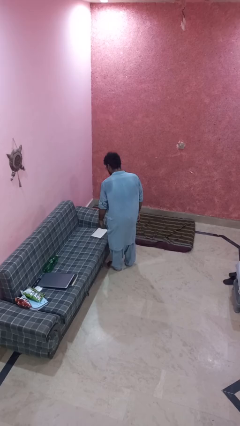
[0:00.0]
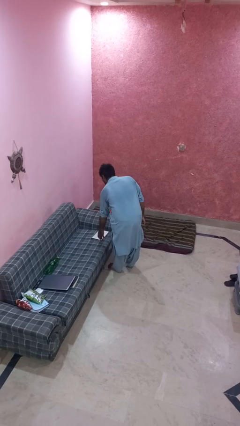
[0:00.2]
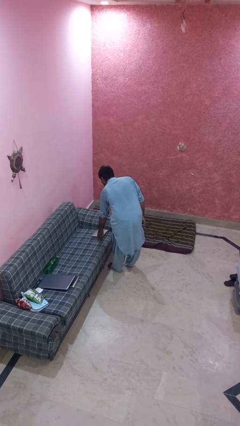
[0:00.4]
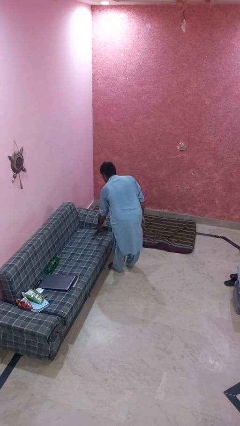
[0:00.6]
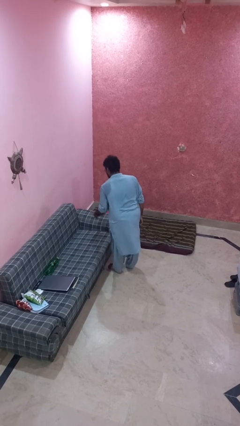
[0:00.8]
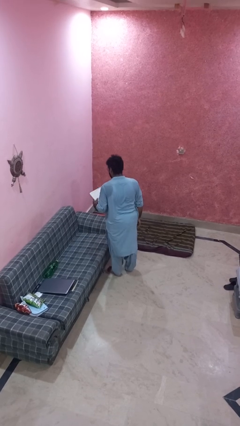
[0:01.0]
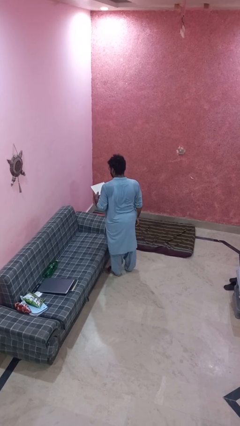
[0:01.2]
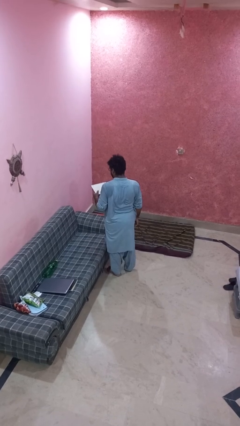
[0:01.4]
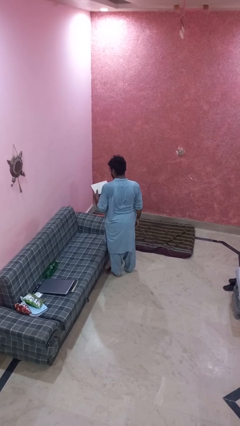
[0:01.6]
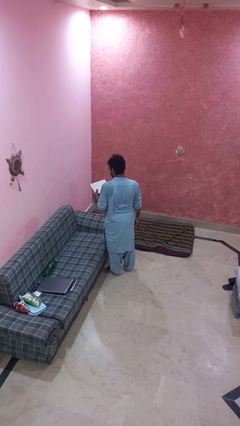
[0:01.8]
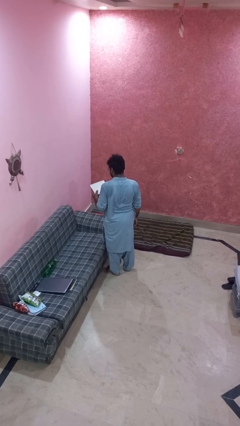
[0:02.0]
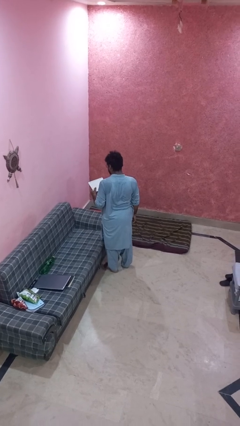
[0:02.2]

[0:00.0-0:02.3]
person picks up object from couch

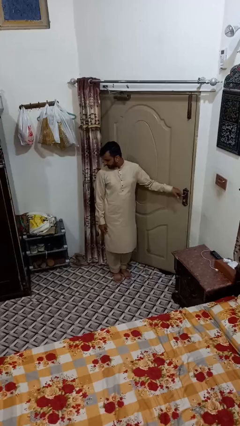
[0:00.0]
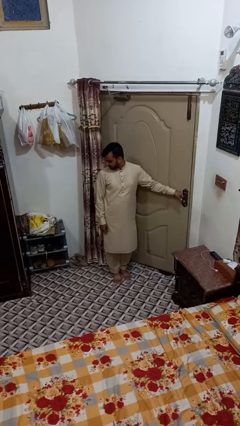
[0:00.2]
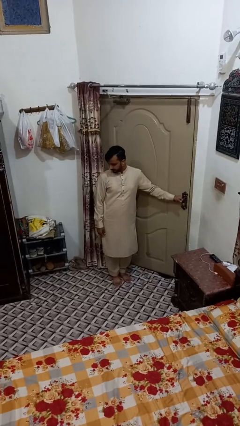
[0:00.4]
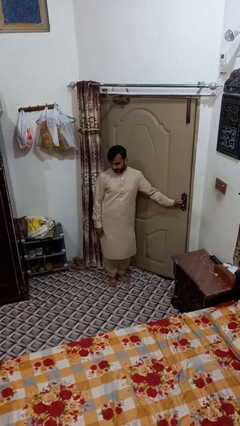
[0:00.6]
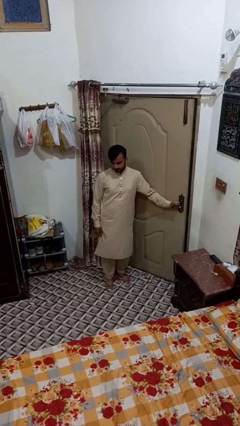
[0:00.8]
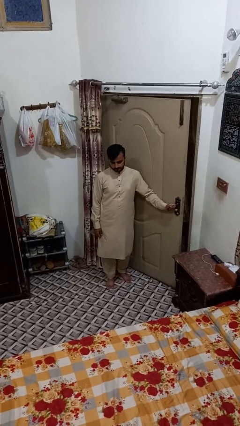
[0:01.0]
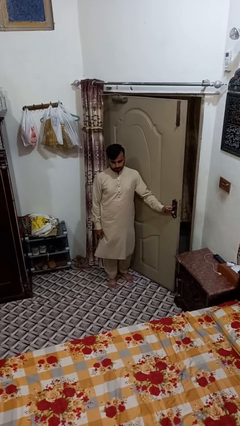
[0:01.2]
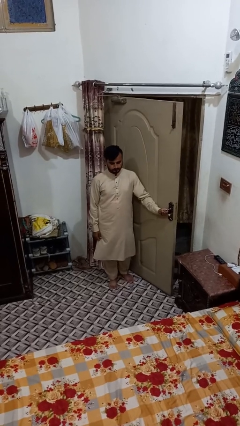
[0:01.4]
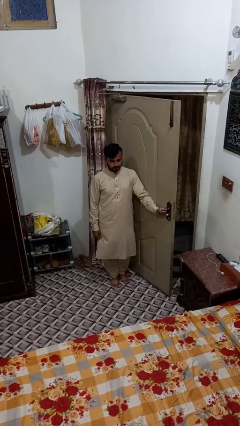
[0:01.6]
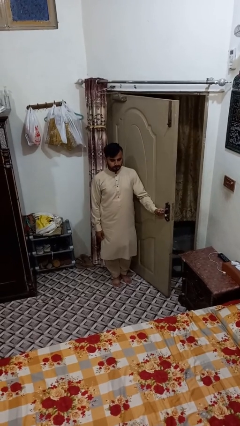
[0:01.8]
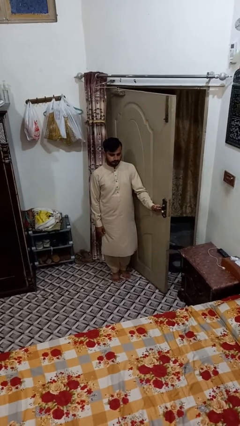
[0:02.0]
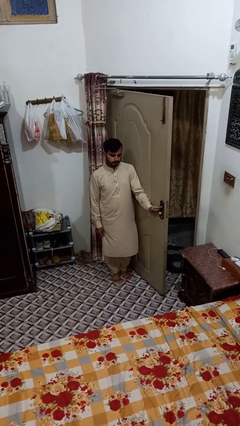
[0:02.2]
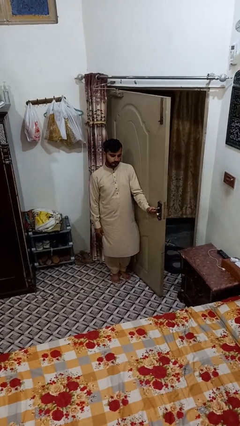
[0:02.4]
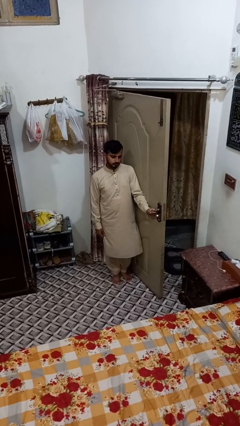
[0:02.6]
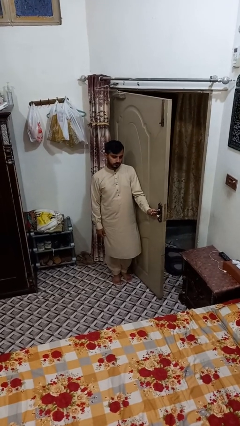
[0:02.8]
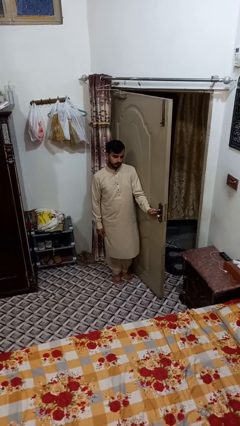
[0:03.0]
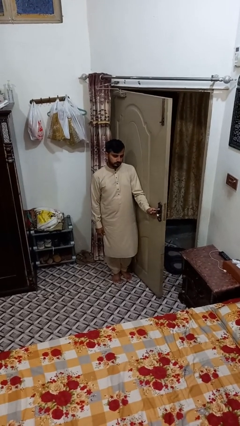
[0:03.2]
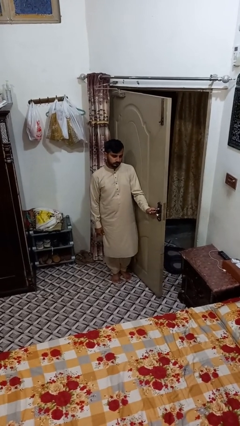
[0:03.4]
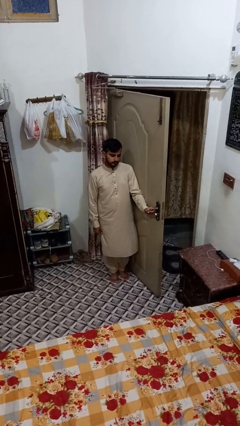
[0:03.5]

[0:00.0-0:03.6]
person opens closet door

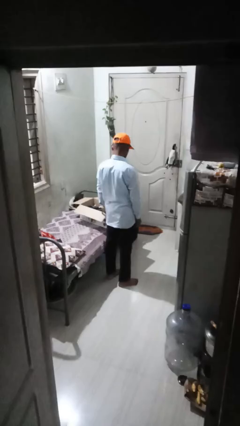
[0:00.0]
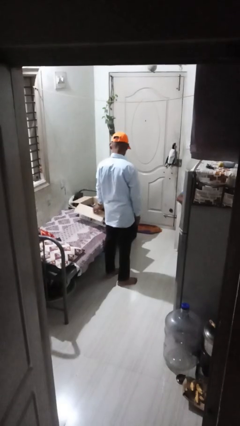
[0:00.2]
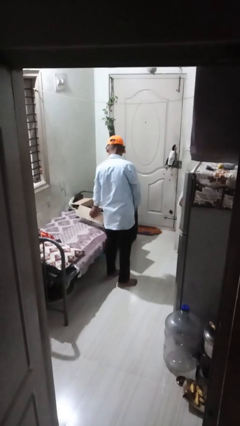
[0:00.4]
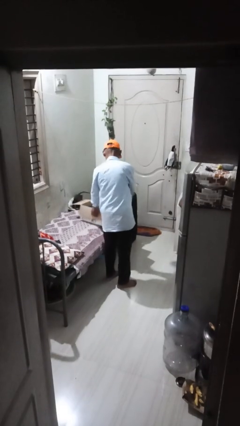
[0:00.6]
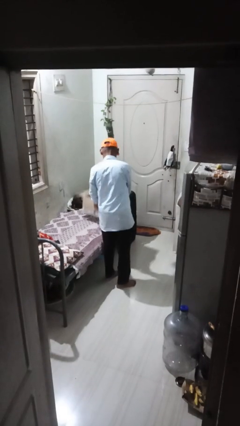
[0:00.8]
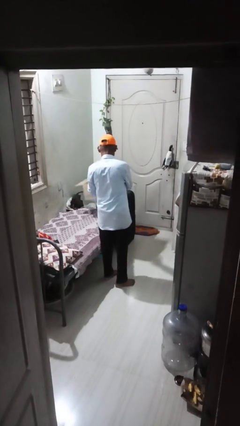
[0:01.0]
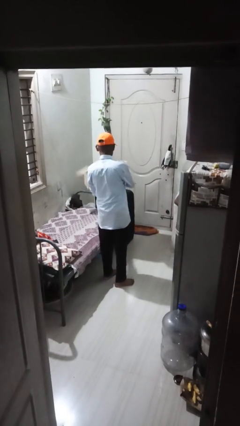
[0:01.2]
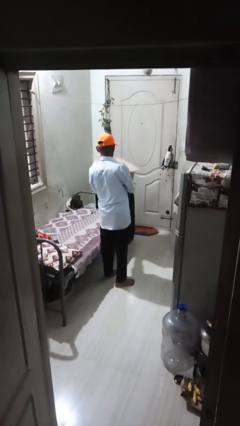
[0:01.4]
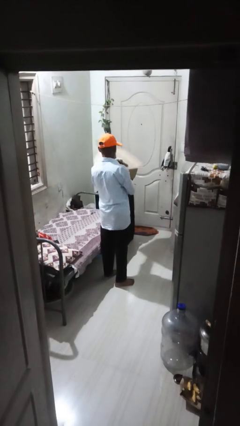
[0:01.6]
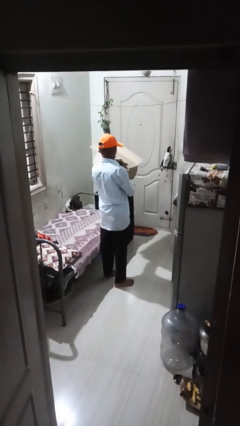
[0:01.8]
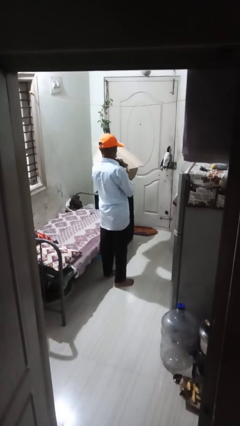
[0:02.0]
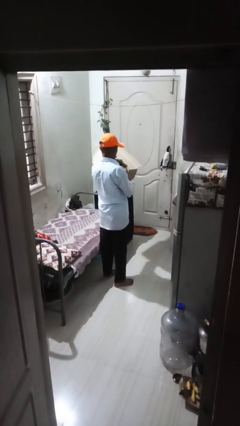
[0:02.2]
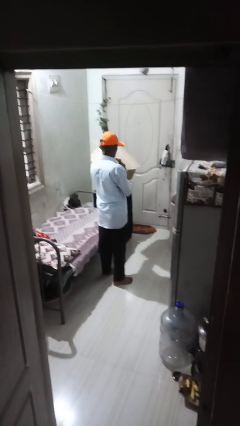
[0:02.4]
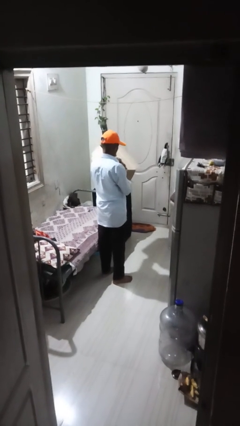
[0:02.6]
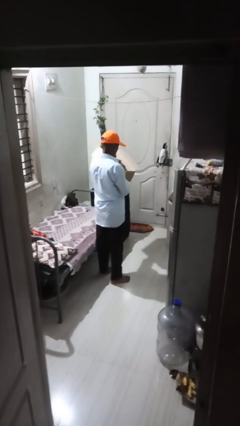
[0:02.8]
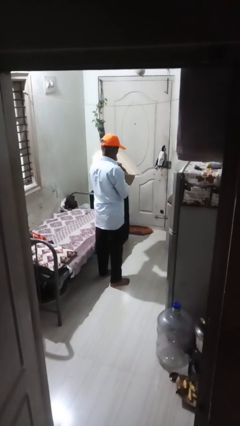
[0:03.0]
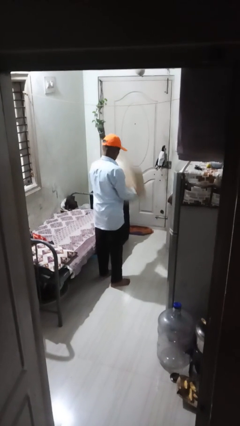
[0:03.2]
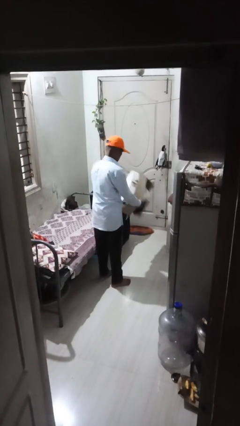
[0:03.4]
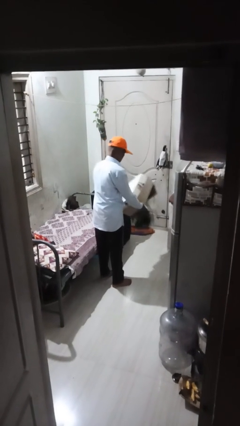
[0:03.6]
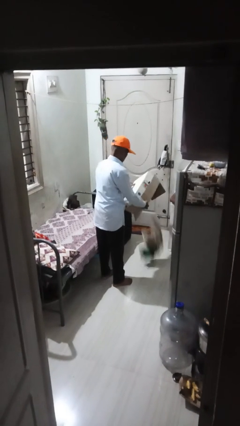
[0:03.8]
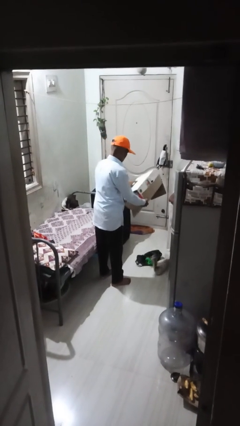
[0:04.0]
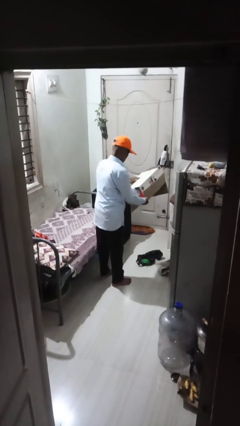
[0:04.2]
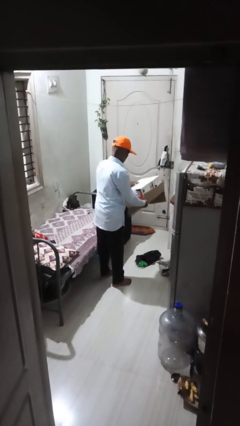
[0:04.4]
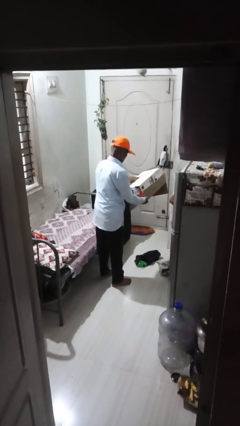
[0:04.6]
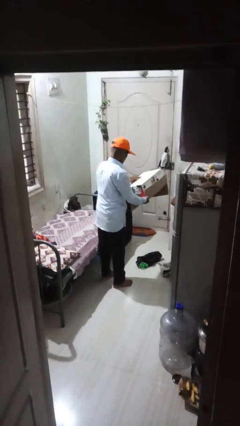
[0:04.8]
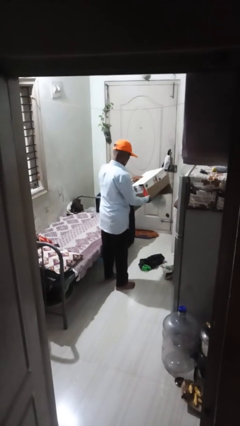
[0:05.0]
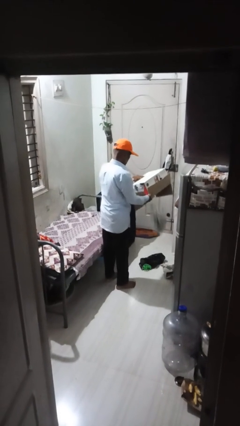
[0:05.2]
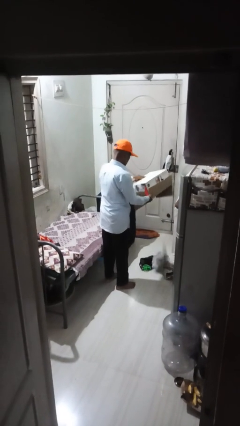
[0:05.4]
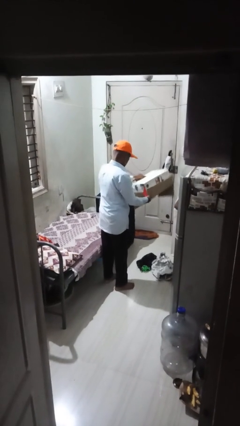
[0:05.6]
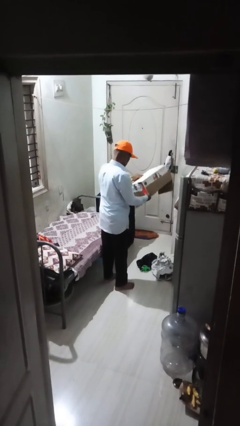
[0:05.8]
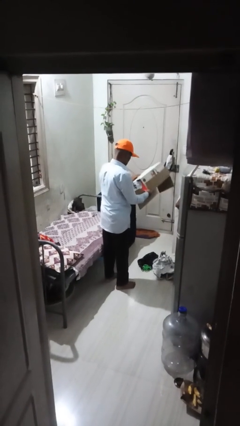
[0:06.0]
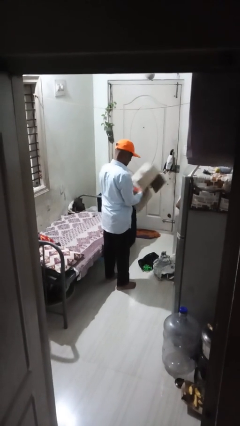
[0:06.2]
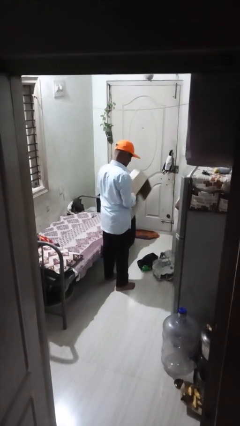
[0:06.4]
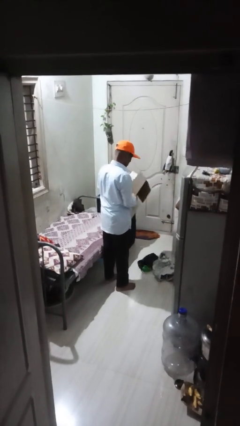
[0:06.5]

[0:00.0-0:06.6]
person unloads box onto floor

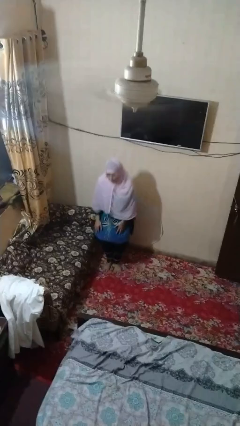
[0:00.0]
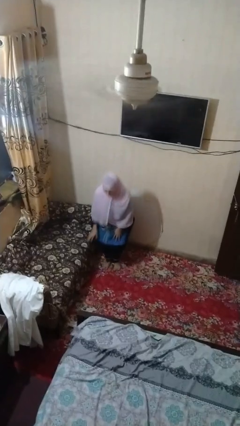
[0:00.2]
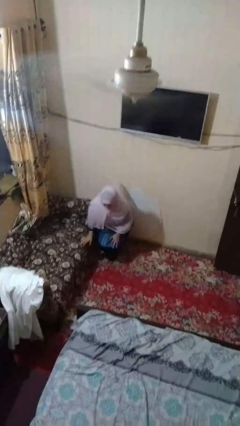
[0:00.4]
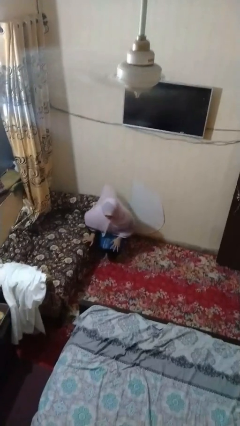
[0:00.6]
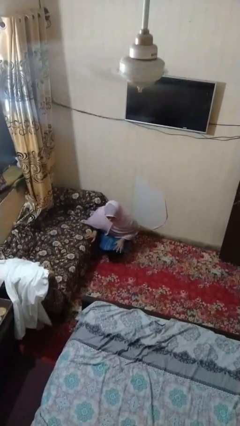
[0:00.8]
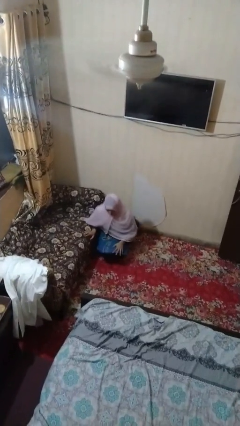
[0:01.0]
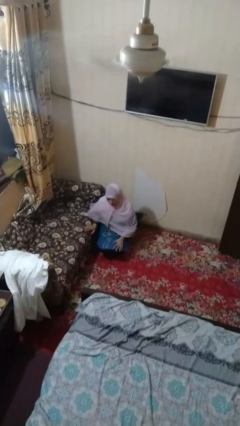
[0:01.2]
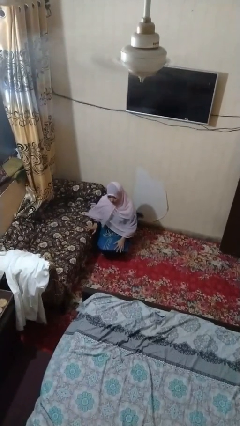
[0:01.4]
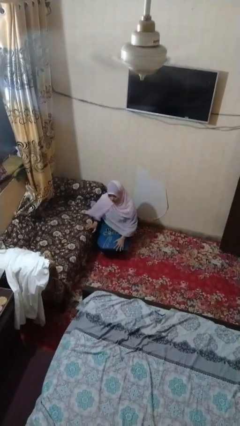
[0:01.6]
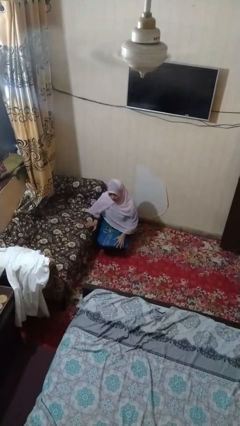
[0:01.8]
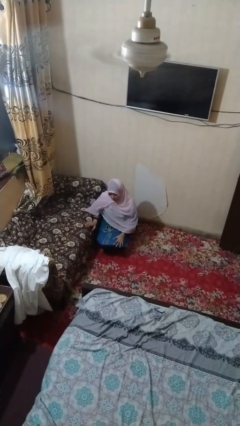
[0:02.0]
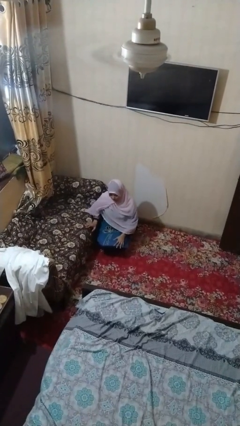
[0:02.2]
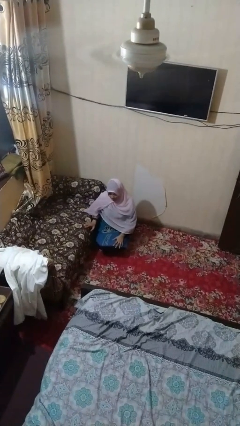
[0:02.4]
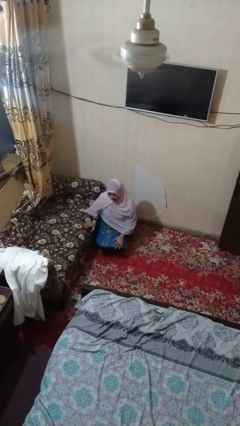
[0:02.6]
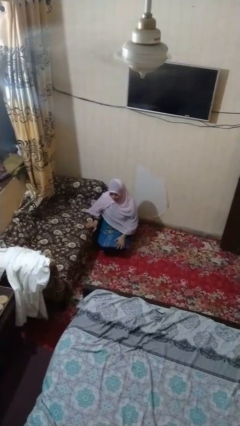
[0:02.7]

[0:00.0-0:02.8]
person squats

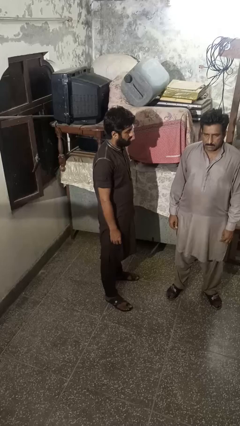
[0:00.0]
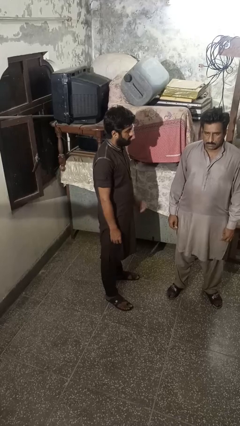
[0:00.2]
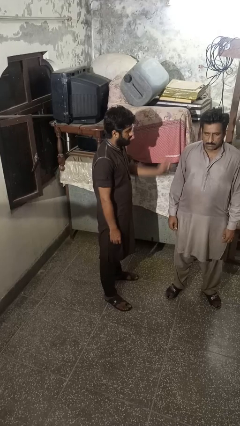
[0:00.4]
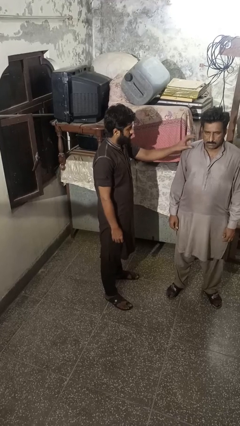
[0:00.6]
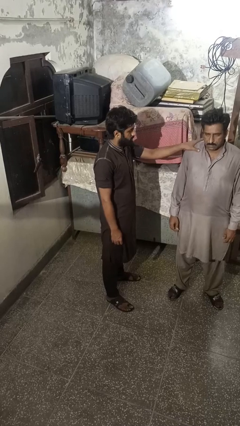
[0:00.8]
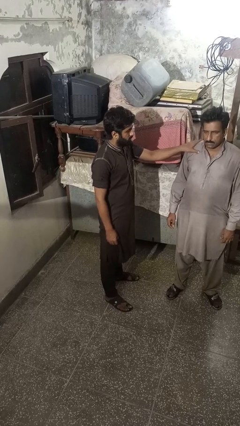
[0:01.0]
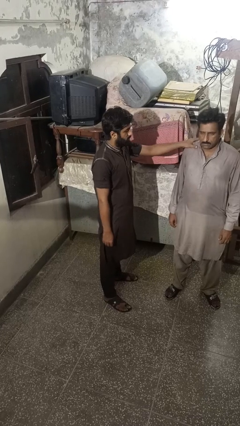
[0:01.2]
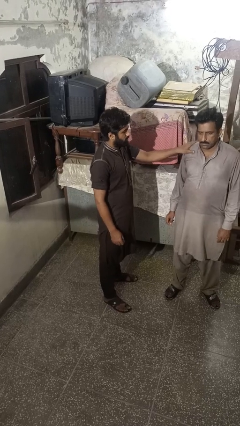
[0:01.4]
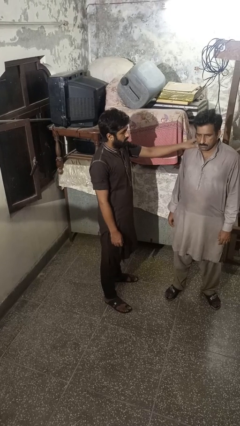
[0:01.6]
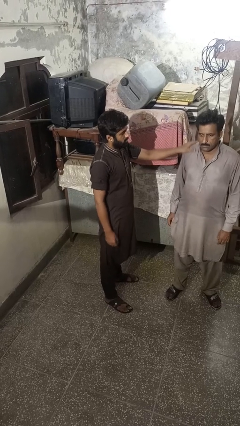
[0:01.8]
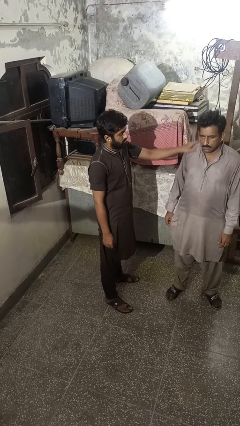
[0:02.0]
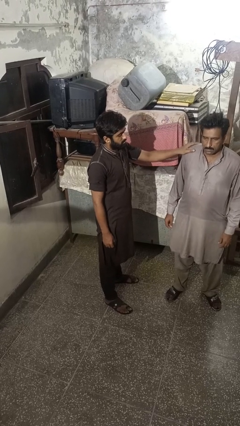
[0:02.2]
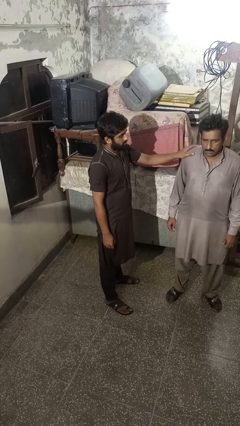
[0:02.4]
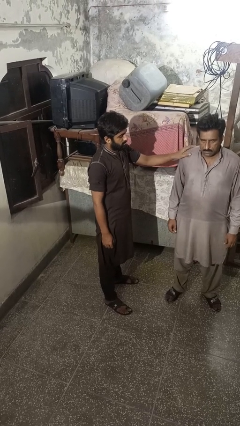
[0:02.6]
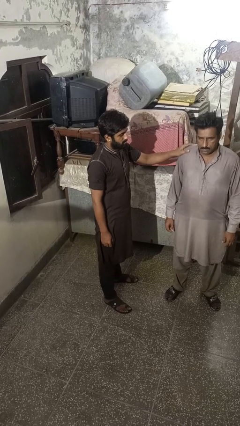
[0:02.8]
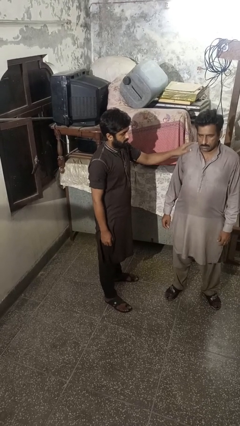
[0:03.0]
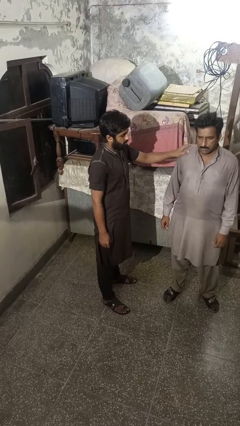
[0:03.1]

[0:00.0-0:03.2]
person grabs person by shoulder
